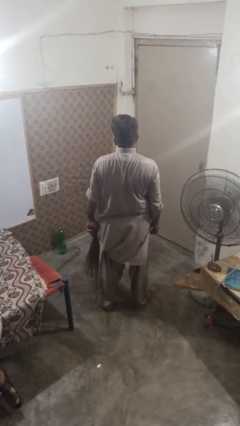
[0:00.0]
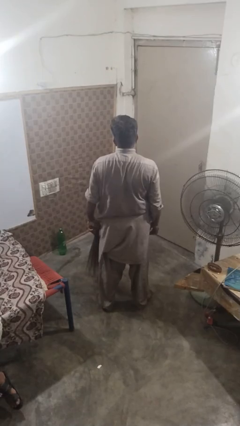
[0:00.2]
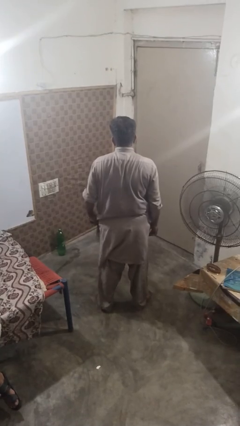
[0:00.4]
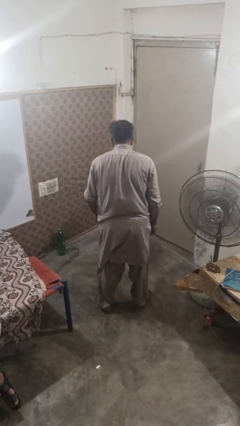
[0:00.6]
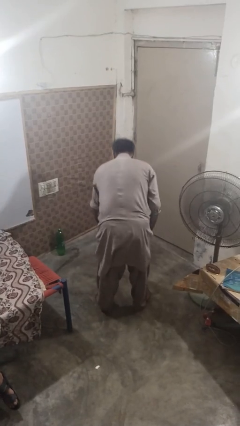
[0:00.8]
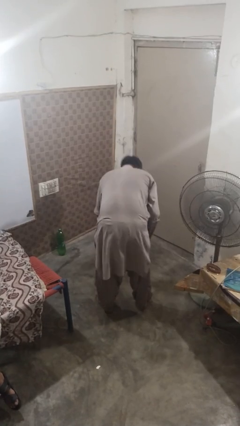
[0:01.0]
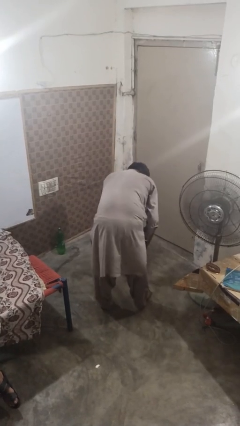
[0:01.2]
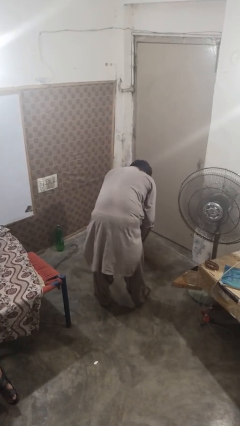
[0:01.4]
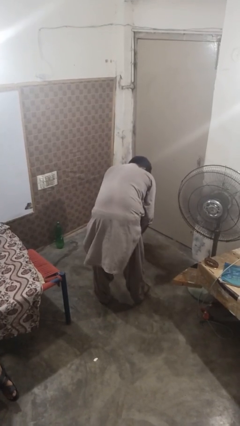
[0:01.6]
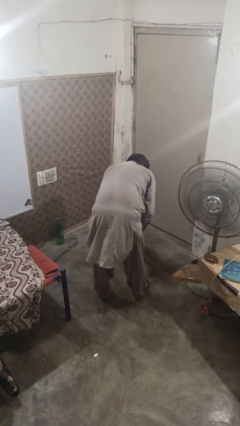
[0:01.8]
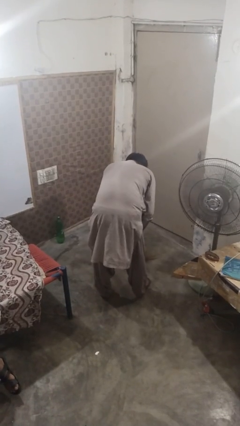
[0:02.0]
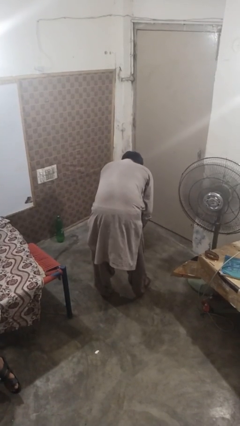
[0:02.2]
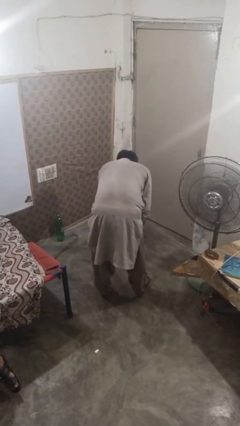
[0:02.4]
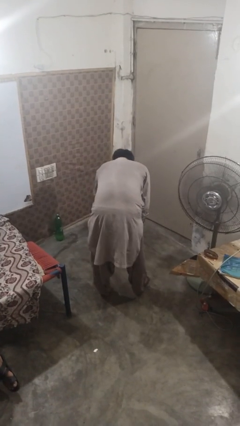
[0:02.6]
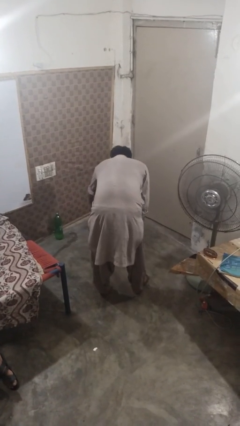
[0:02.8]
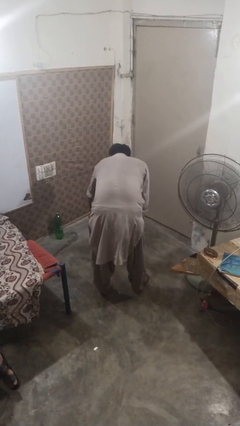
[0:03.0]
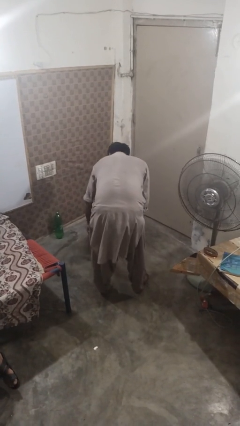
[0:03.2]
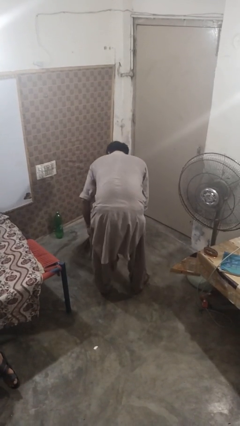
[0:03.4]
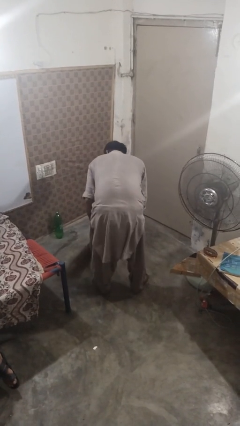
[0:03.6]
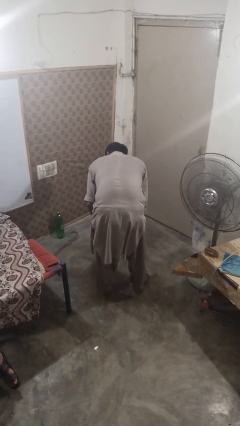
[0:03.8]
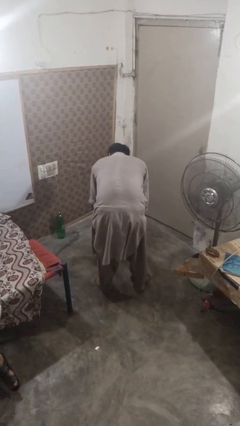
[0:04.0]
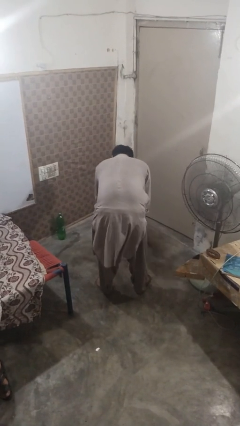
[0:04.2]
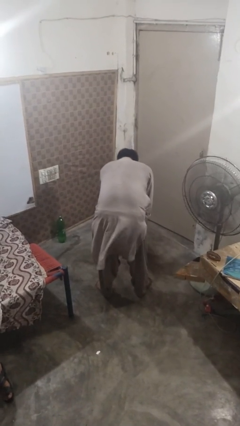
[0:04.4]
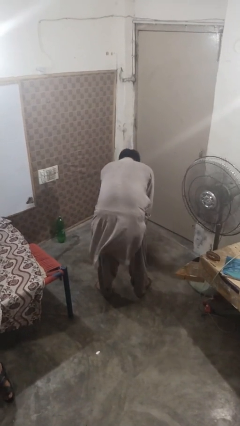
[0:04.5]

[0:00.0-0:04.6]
person sweeps floor

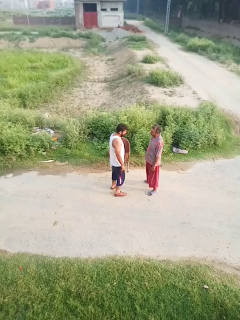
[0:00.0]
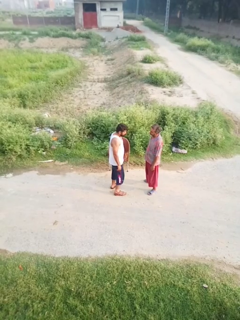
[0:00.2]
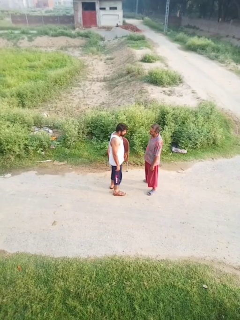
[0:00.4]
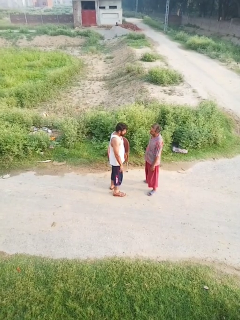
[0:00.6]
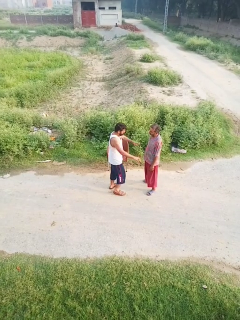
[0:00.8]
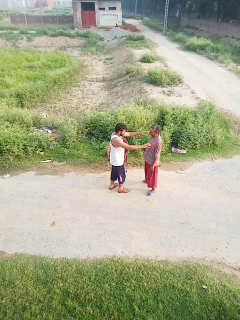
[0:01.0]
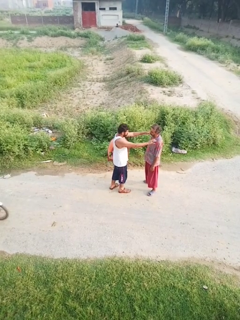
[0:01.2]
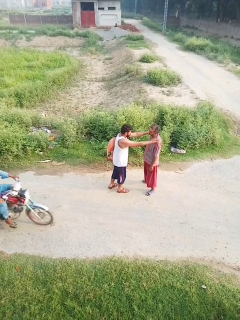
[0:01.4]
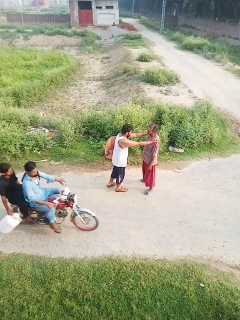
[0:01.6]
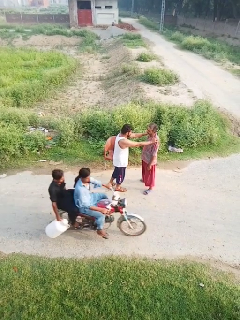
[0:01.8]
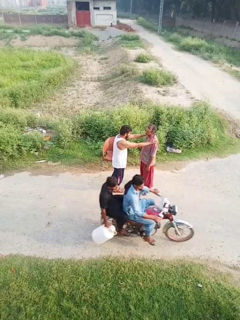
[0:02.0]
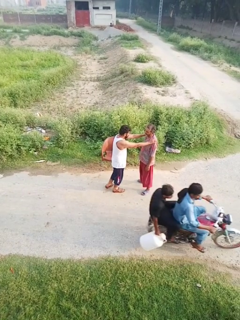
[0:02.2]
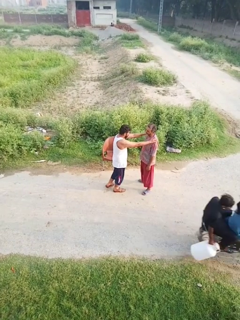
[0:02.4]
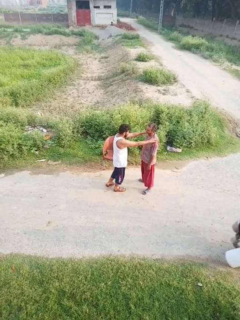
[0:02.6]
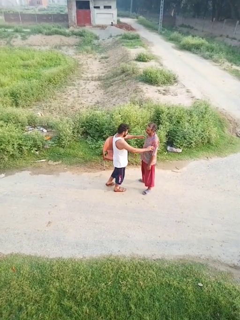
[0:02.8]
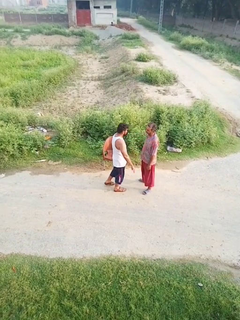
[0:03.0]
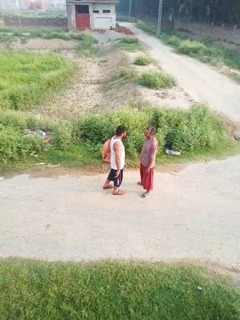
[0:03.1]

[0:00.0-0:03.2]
person pounds shoulders of person

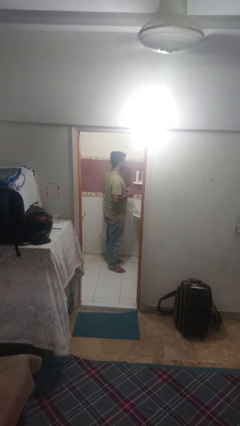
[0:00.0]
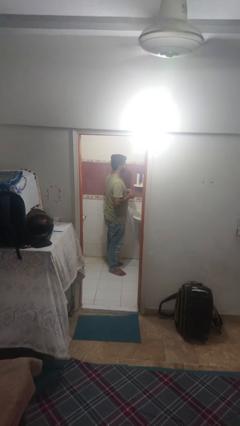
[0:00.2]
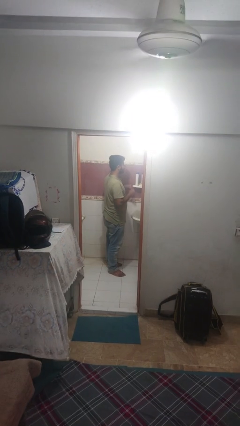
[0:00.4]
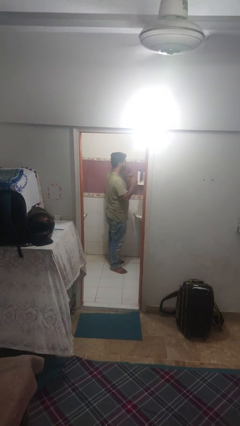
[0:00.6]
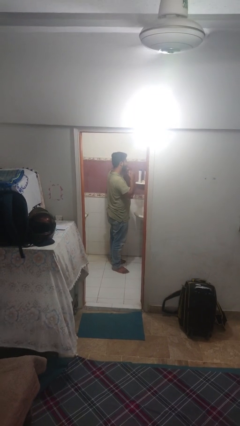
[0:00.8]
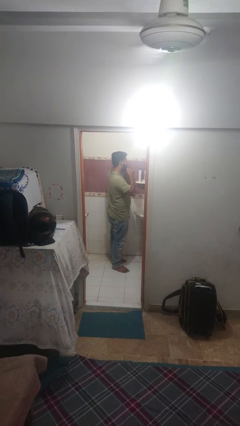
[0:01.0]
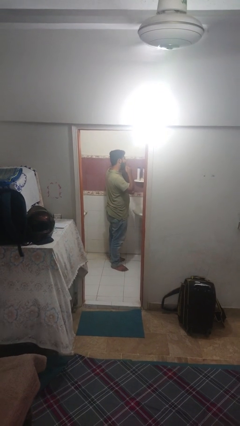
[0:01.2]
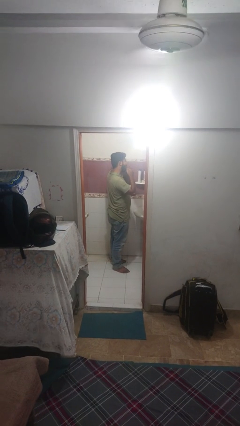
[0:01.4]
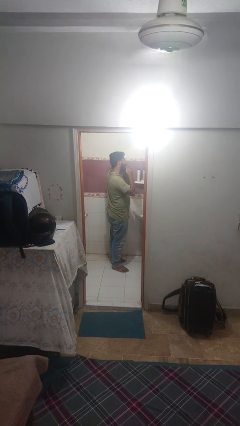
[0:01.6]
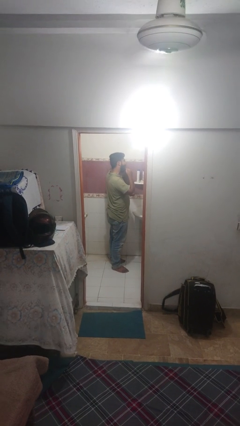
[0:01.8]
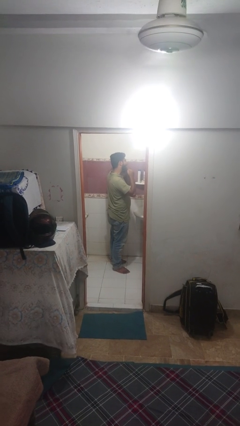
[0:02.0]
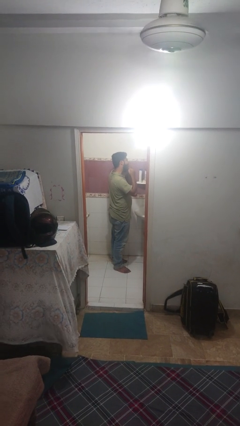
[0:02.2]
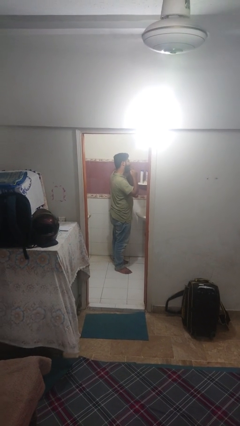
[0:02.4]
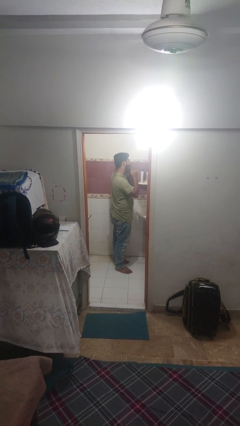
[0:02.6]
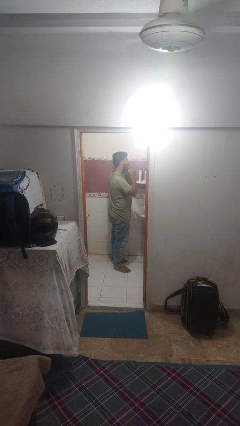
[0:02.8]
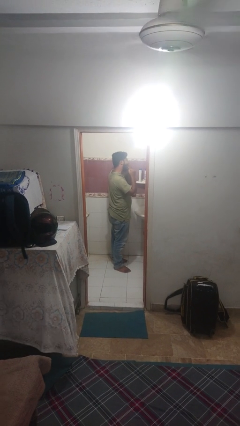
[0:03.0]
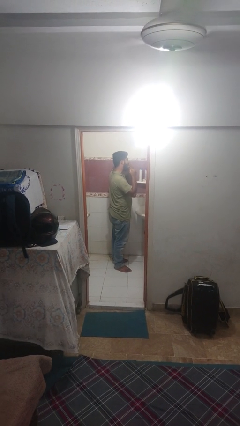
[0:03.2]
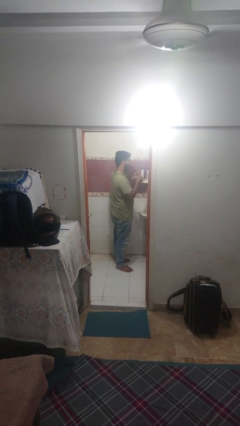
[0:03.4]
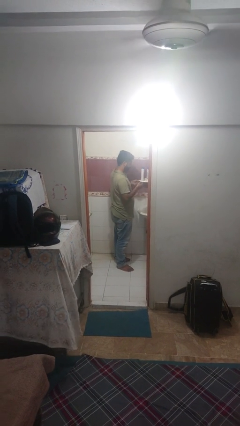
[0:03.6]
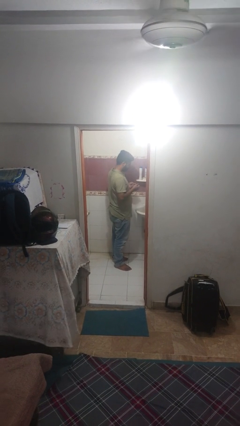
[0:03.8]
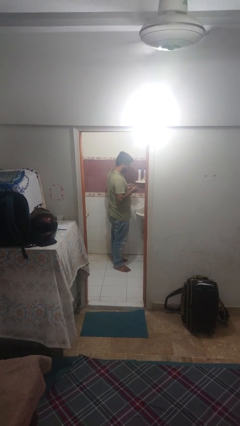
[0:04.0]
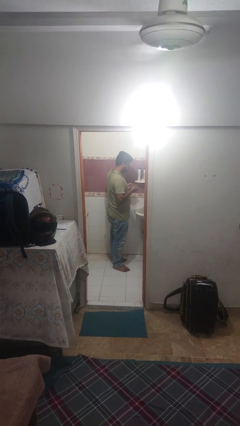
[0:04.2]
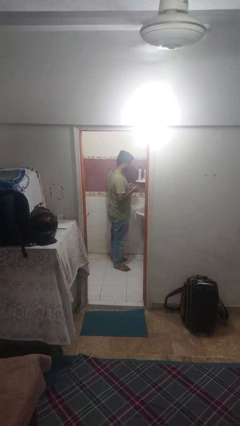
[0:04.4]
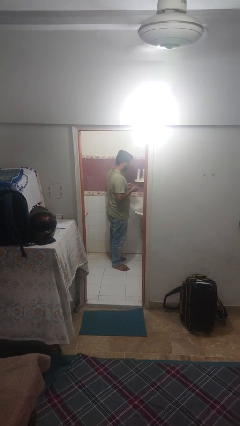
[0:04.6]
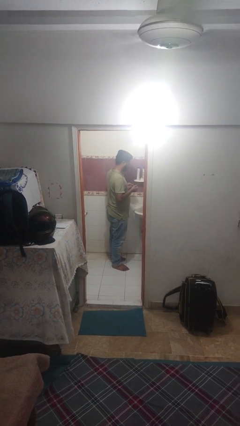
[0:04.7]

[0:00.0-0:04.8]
person flosses

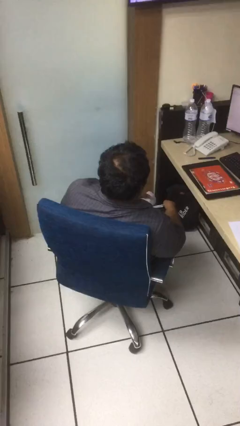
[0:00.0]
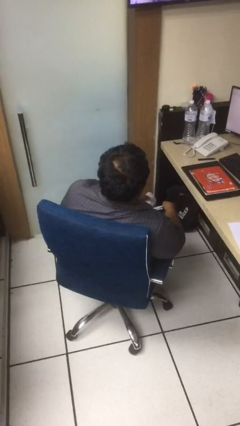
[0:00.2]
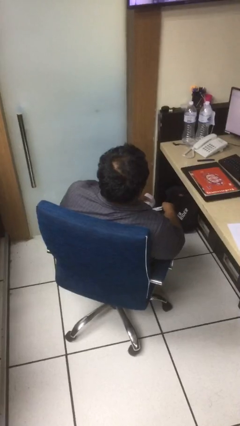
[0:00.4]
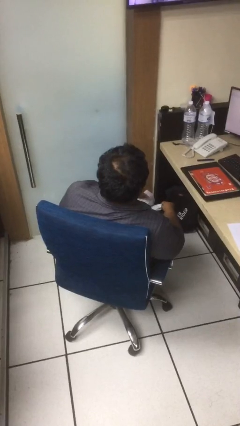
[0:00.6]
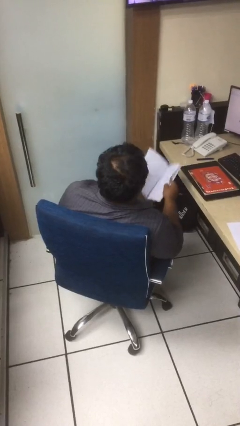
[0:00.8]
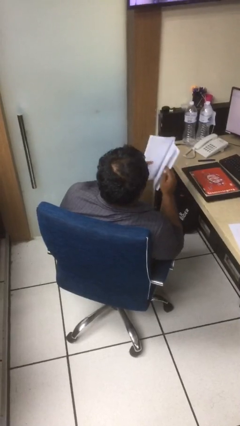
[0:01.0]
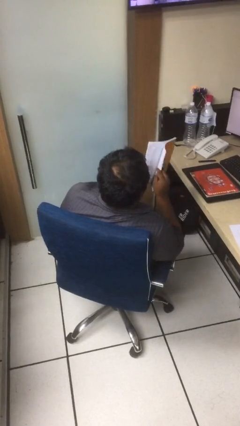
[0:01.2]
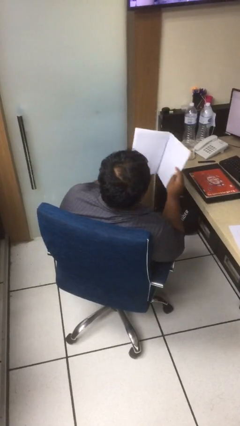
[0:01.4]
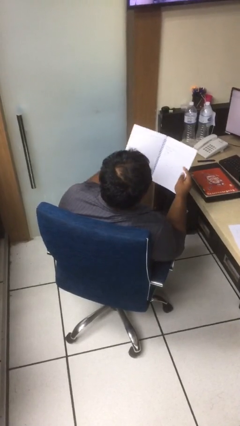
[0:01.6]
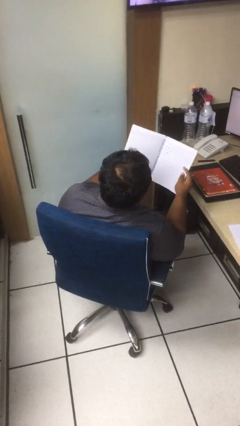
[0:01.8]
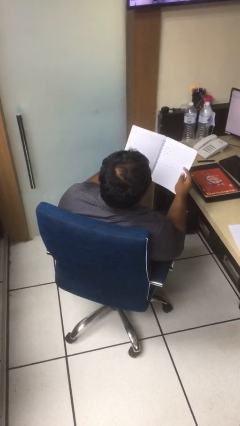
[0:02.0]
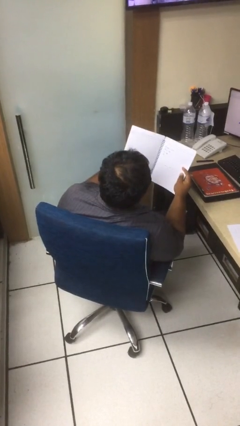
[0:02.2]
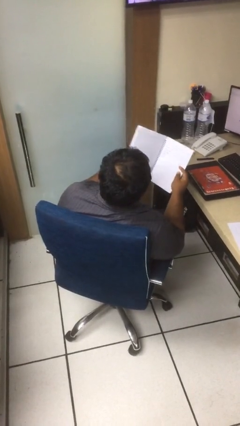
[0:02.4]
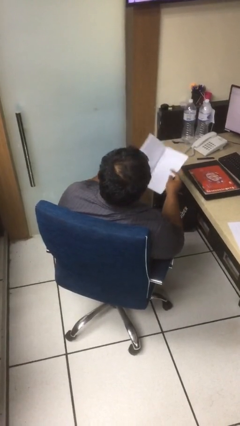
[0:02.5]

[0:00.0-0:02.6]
person reads book

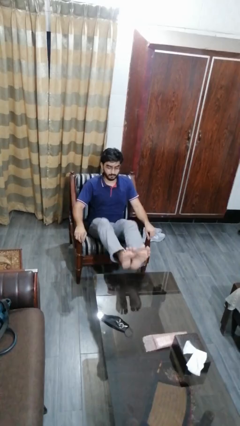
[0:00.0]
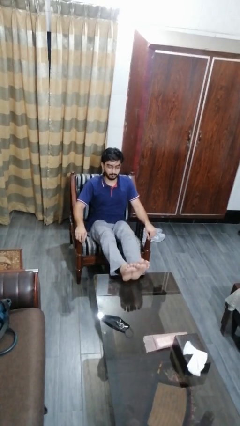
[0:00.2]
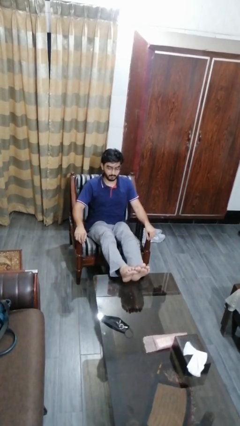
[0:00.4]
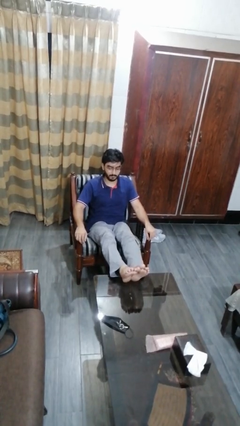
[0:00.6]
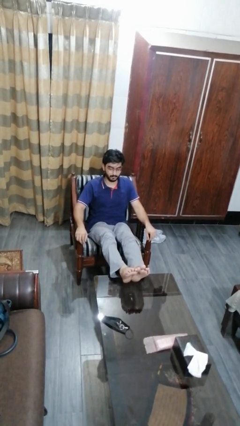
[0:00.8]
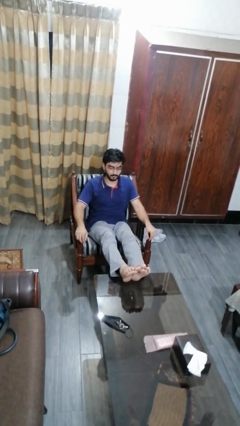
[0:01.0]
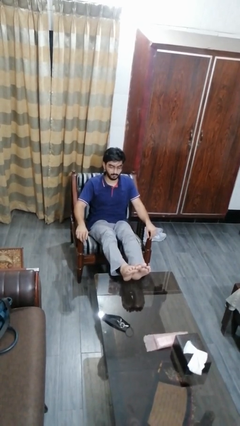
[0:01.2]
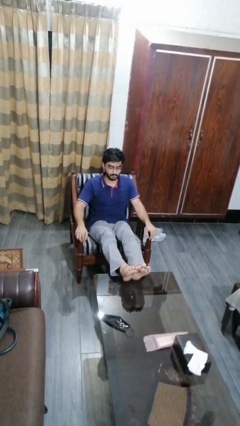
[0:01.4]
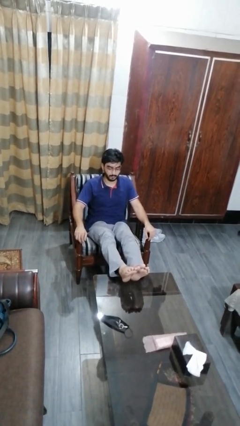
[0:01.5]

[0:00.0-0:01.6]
person puts feet up

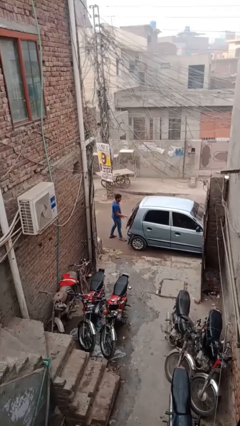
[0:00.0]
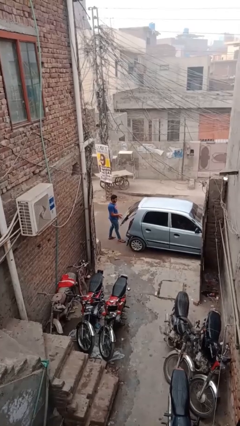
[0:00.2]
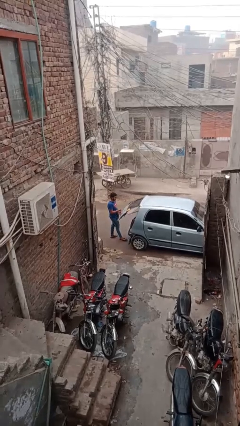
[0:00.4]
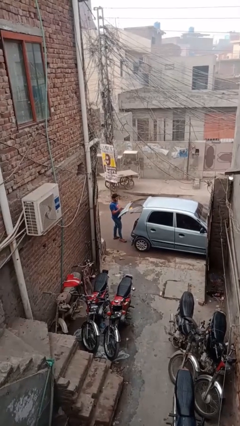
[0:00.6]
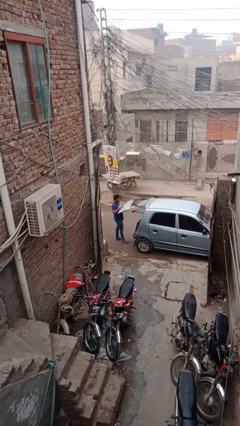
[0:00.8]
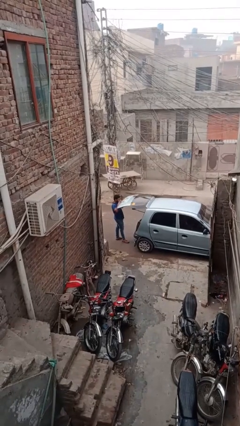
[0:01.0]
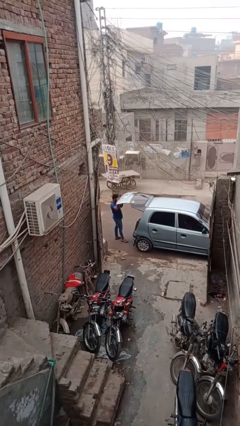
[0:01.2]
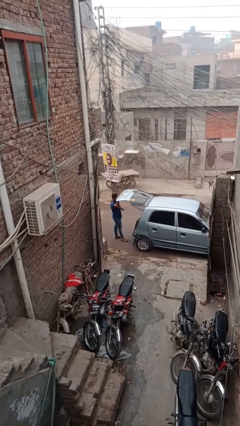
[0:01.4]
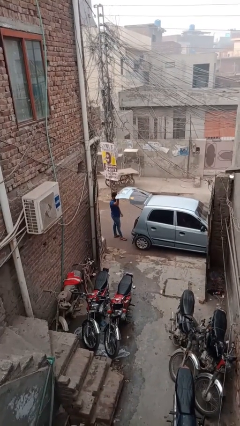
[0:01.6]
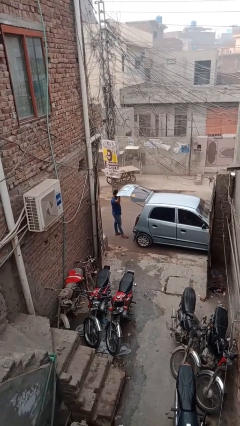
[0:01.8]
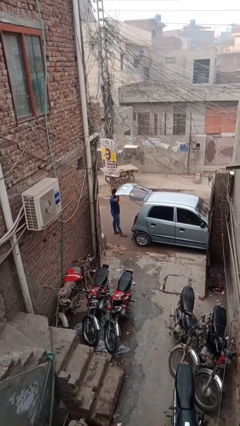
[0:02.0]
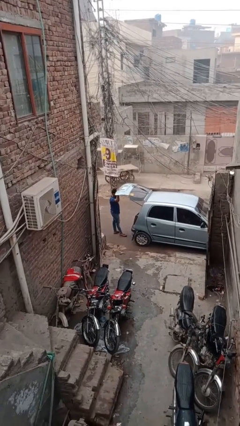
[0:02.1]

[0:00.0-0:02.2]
person opens car trunk
